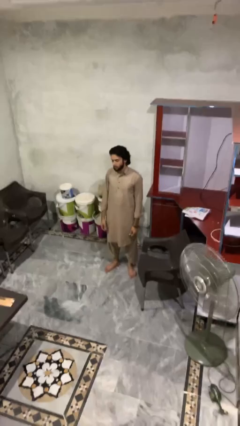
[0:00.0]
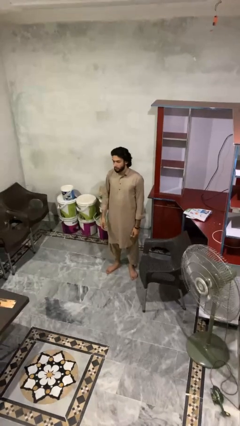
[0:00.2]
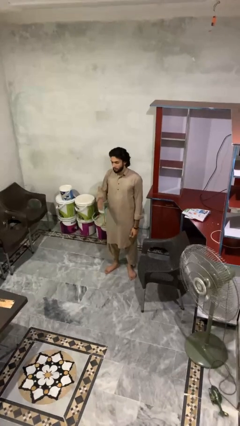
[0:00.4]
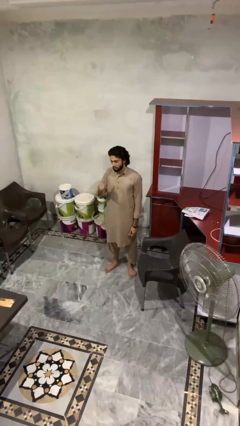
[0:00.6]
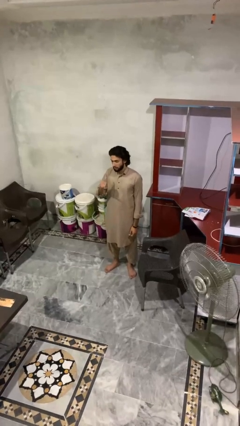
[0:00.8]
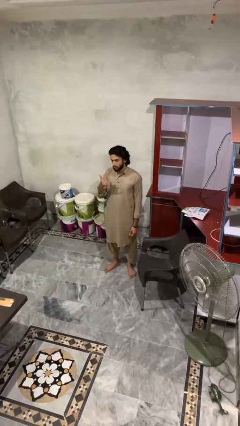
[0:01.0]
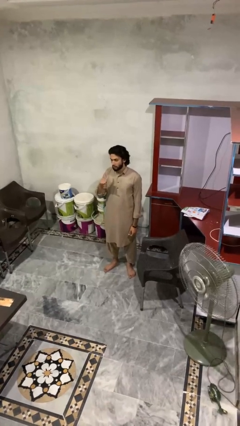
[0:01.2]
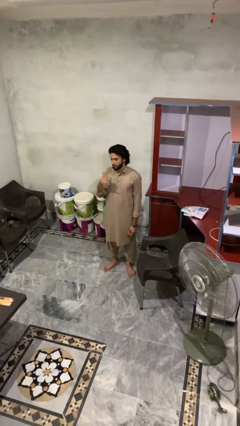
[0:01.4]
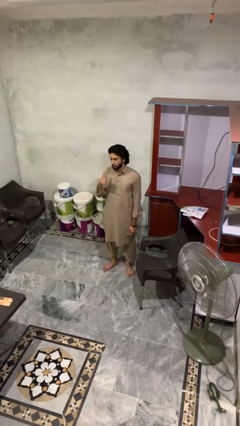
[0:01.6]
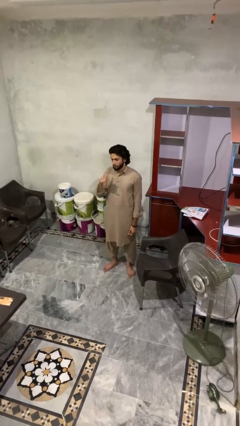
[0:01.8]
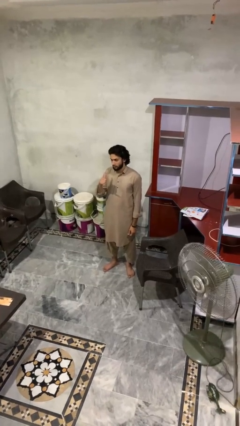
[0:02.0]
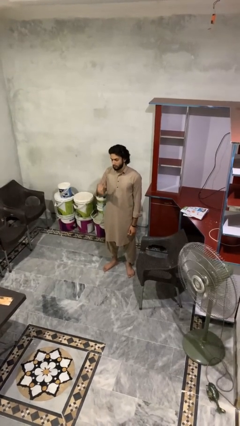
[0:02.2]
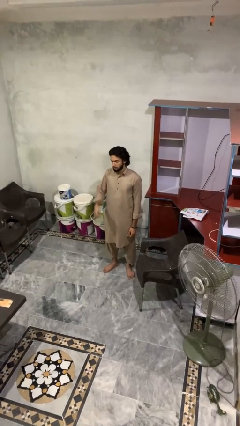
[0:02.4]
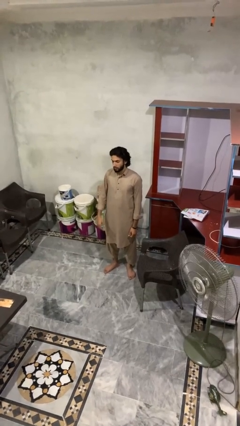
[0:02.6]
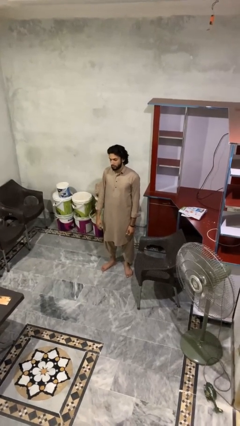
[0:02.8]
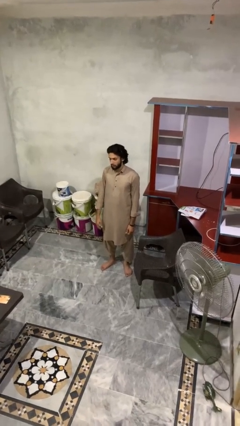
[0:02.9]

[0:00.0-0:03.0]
person gestures hang loose

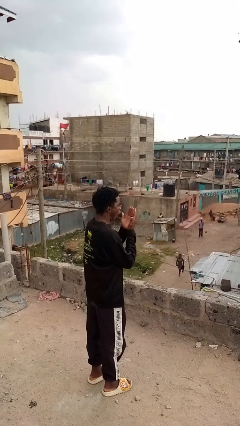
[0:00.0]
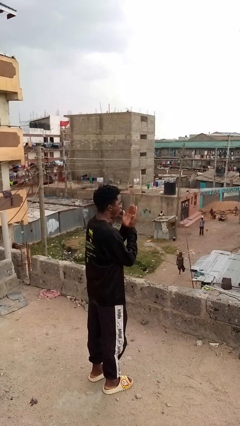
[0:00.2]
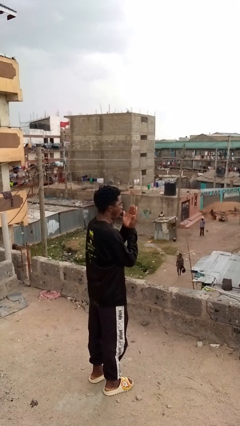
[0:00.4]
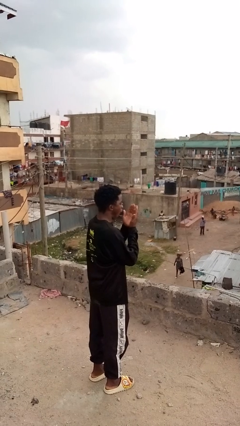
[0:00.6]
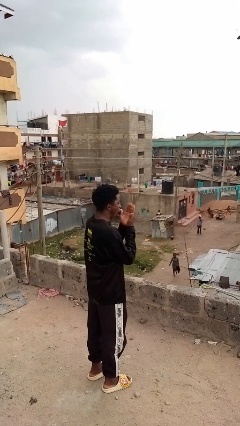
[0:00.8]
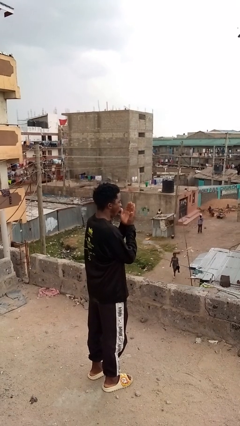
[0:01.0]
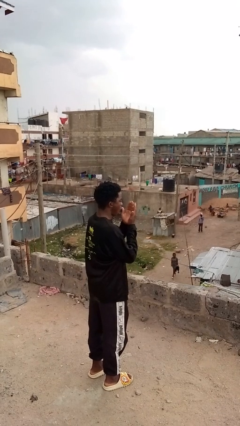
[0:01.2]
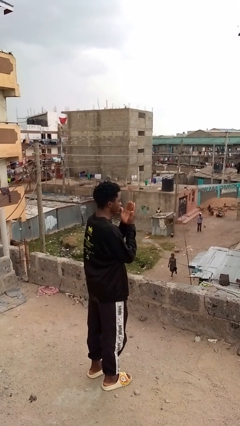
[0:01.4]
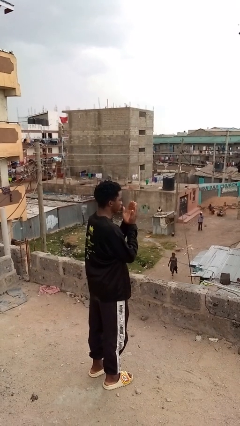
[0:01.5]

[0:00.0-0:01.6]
person blows into hands

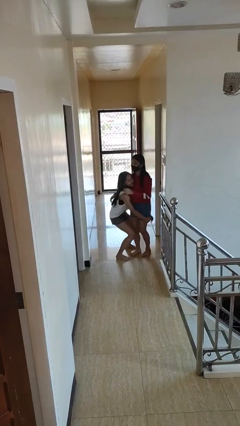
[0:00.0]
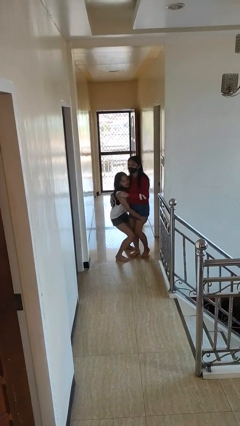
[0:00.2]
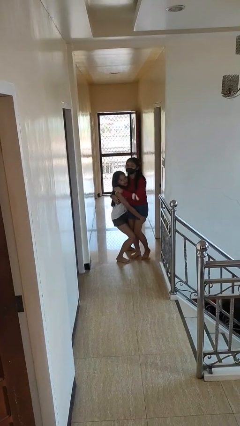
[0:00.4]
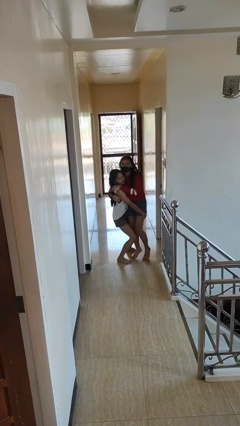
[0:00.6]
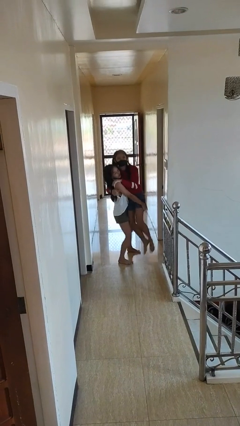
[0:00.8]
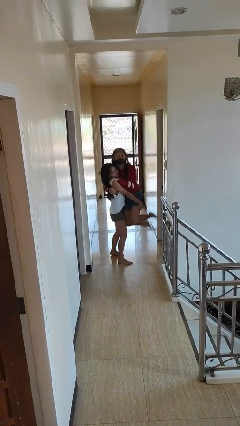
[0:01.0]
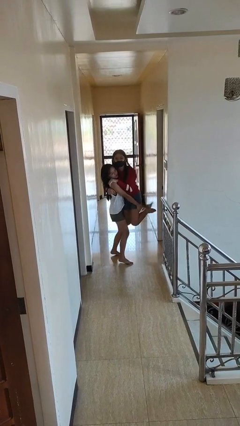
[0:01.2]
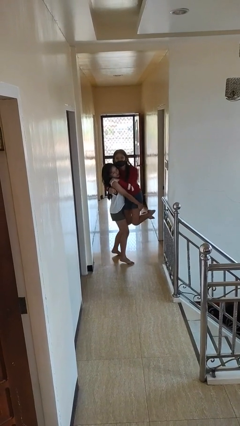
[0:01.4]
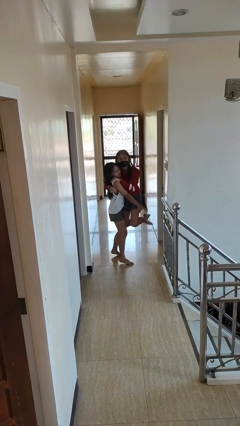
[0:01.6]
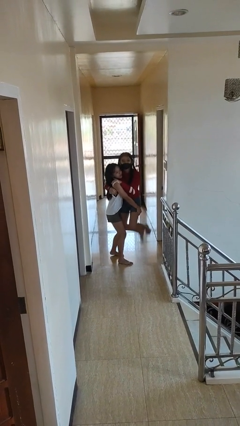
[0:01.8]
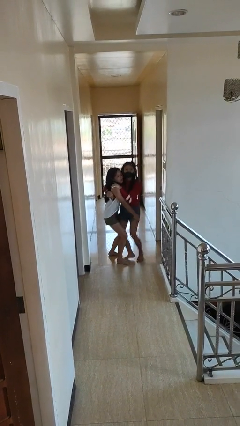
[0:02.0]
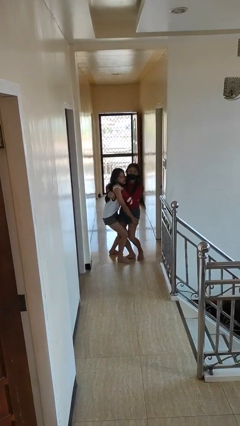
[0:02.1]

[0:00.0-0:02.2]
person picks up person

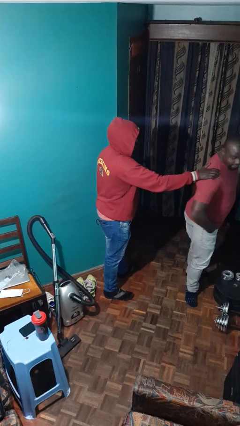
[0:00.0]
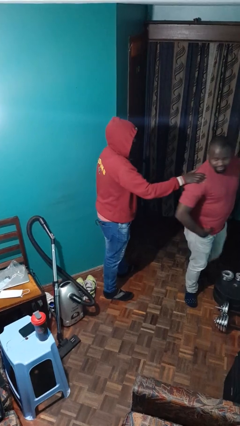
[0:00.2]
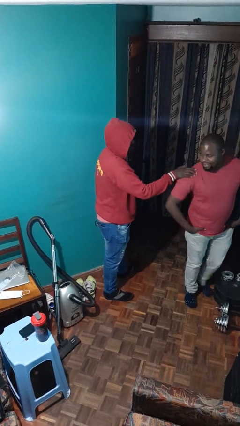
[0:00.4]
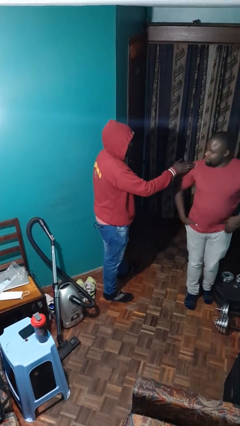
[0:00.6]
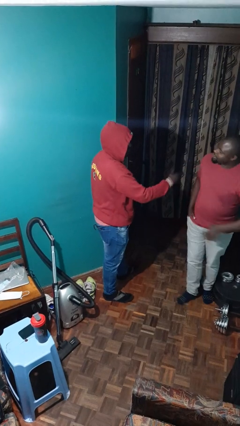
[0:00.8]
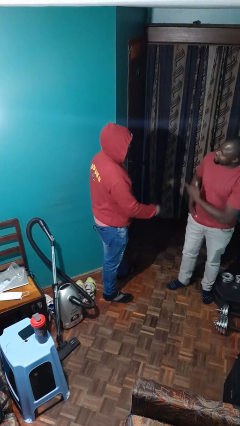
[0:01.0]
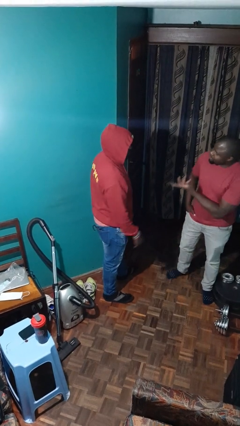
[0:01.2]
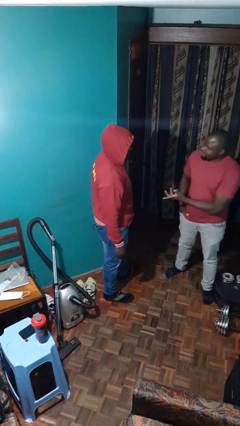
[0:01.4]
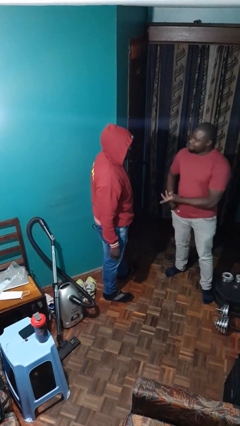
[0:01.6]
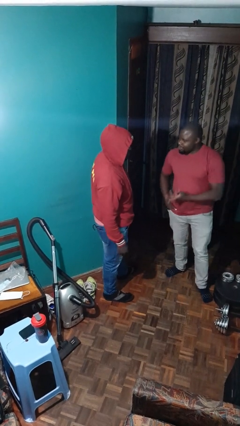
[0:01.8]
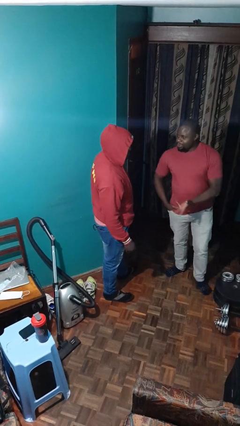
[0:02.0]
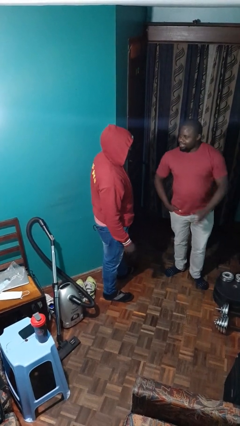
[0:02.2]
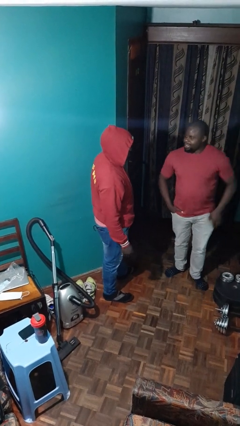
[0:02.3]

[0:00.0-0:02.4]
person spins person around

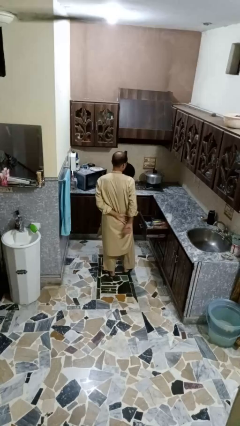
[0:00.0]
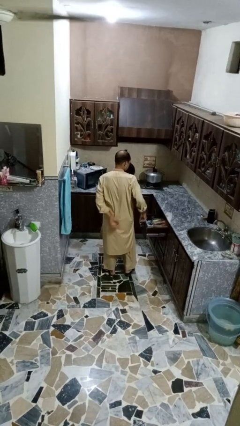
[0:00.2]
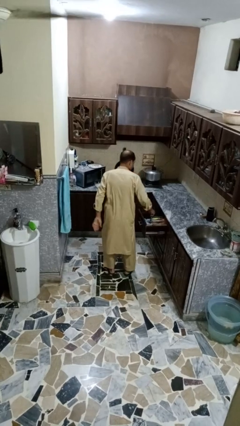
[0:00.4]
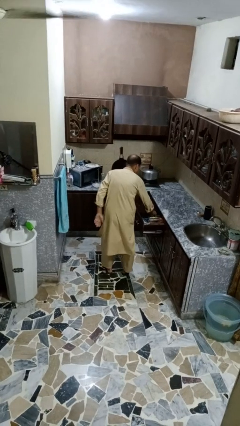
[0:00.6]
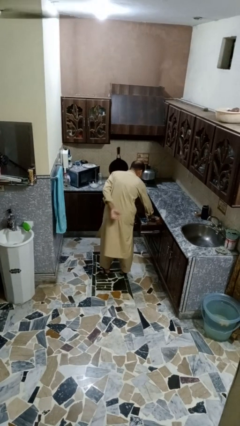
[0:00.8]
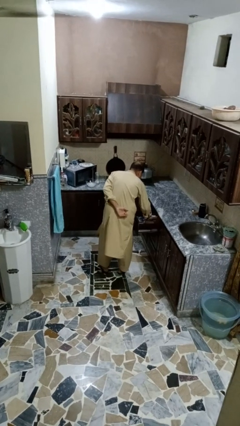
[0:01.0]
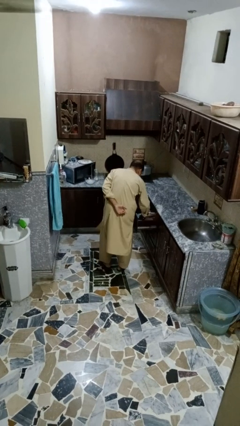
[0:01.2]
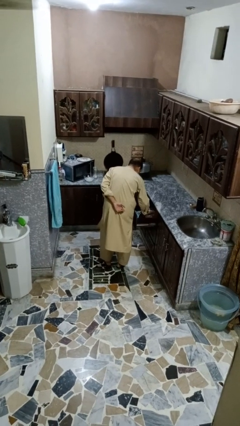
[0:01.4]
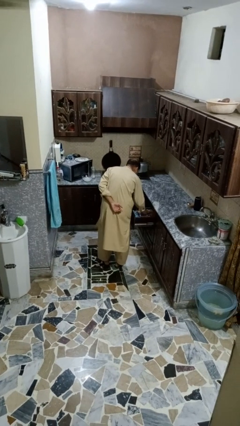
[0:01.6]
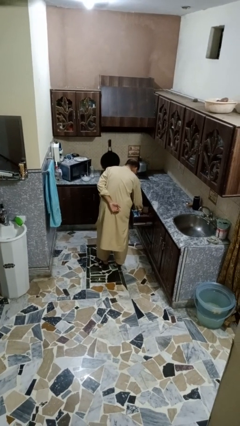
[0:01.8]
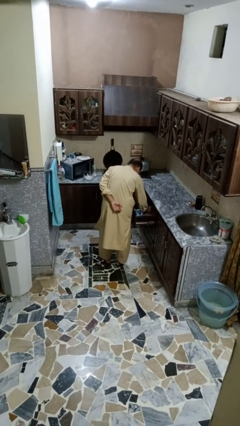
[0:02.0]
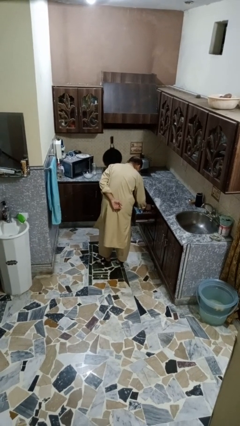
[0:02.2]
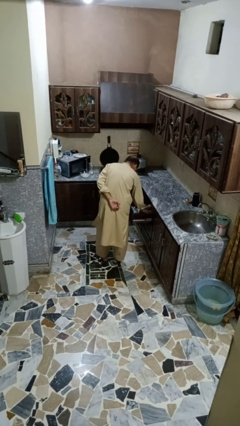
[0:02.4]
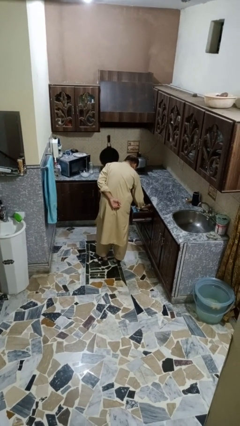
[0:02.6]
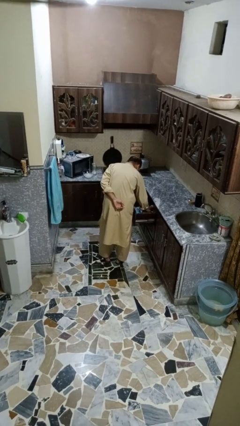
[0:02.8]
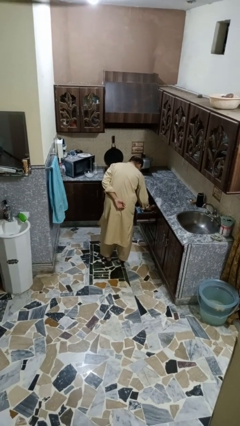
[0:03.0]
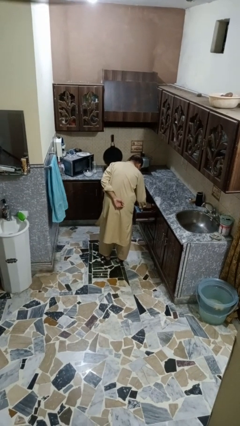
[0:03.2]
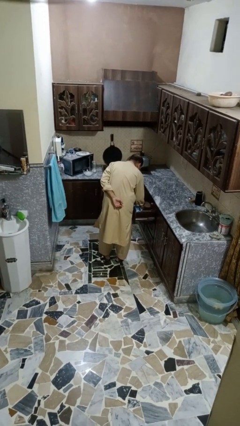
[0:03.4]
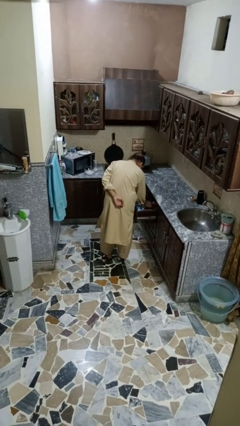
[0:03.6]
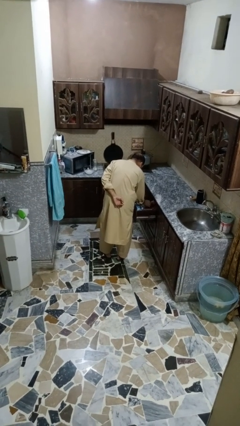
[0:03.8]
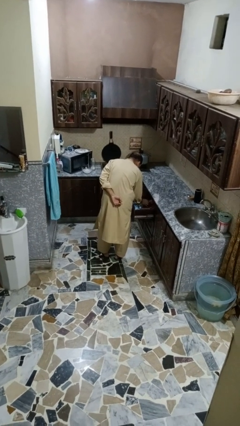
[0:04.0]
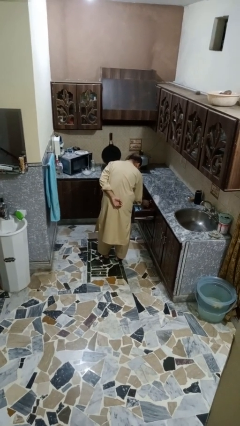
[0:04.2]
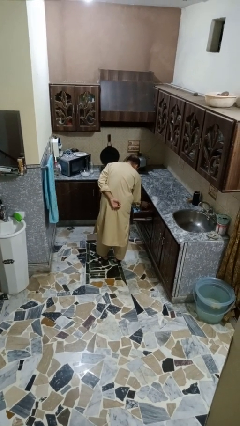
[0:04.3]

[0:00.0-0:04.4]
person searches in kitchen drawer

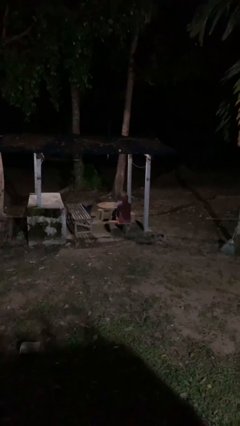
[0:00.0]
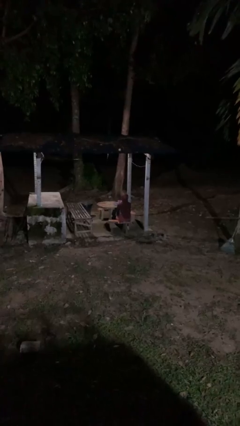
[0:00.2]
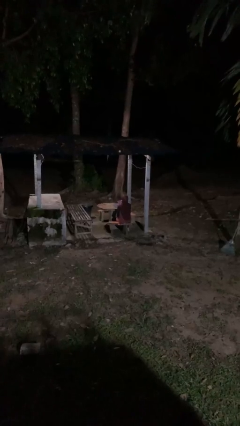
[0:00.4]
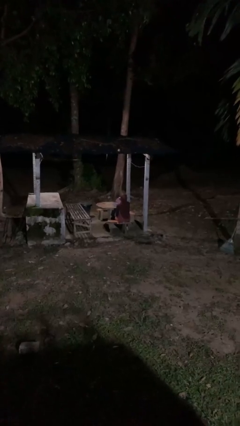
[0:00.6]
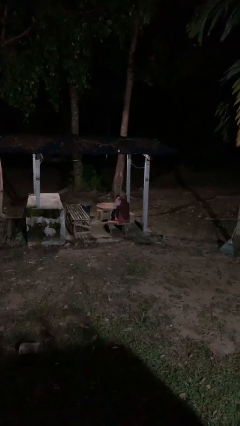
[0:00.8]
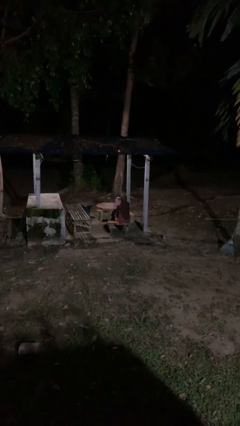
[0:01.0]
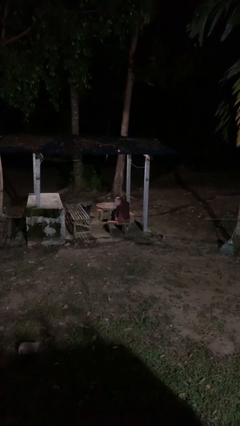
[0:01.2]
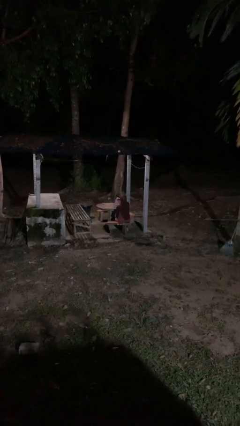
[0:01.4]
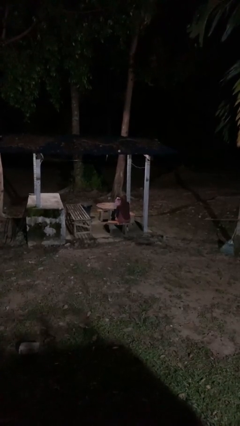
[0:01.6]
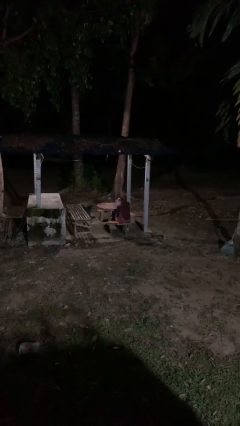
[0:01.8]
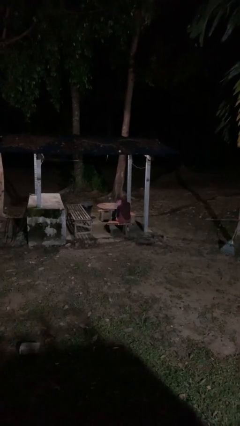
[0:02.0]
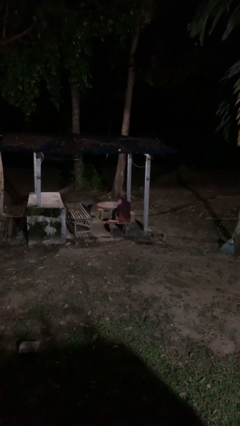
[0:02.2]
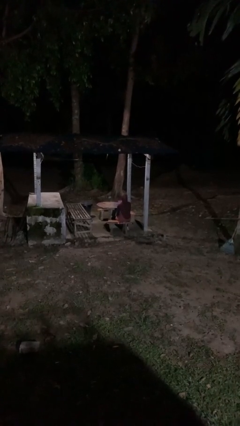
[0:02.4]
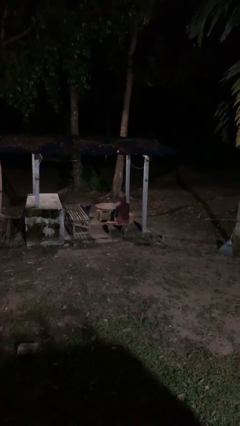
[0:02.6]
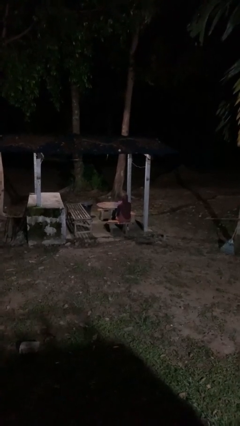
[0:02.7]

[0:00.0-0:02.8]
person pours coffee into mug

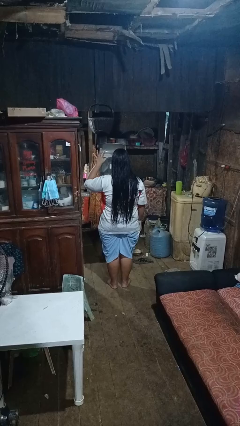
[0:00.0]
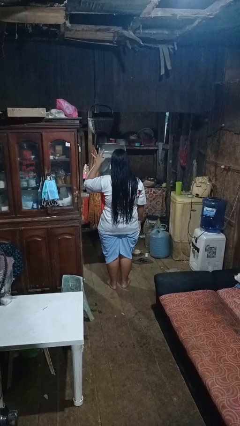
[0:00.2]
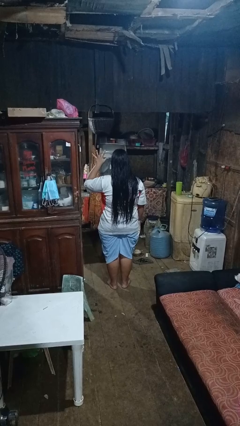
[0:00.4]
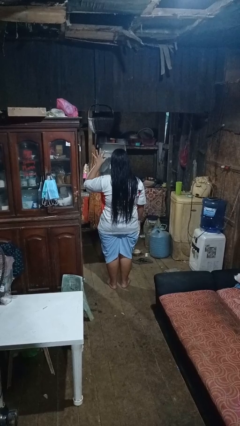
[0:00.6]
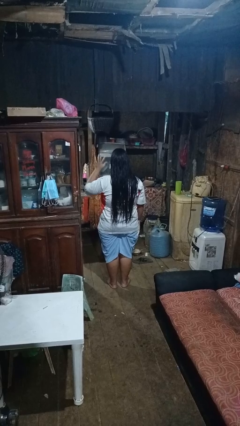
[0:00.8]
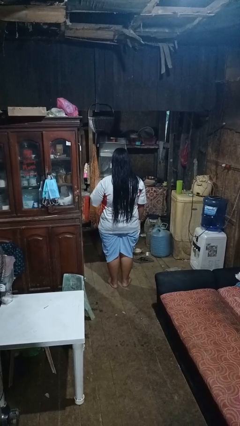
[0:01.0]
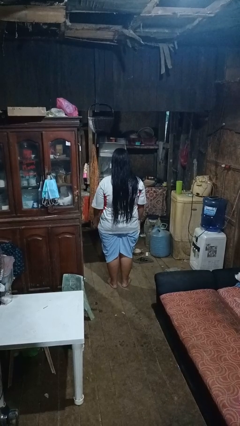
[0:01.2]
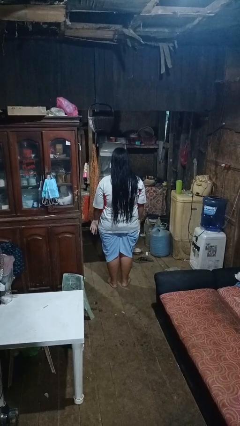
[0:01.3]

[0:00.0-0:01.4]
person gestures number five
